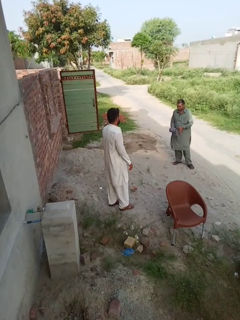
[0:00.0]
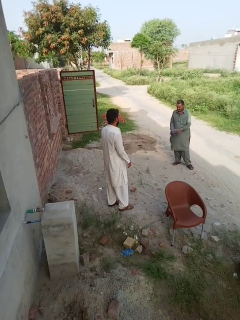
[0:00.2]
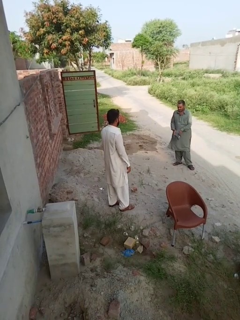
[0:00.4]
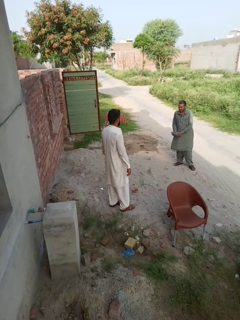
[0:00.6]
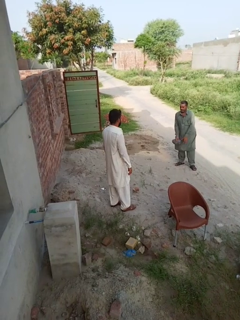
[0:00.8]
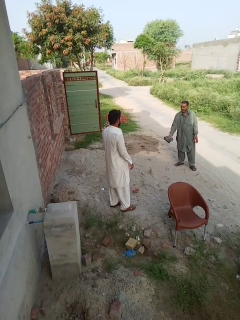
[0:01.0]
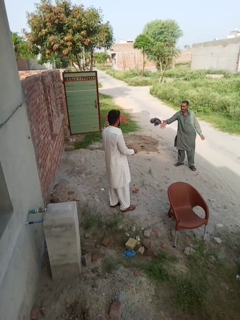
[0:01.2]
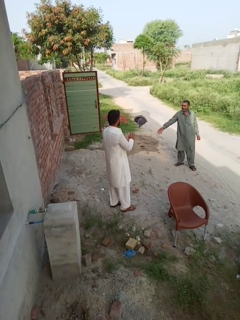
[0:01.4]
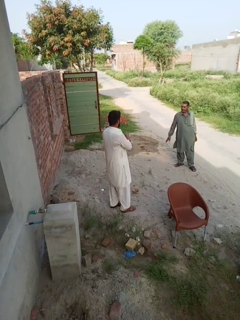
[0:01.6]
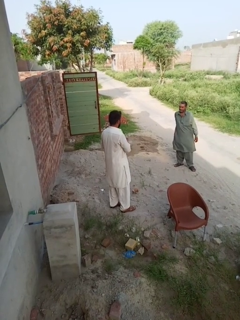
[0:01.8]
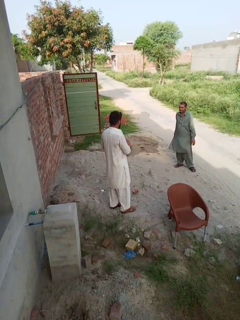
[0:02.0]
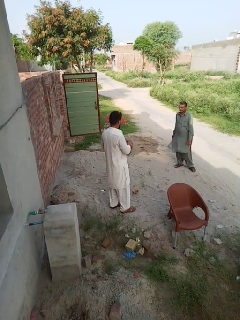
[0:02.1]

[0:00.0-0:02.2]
person catches object from person

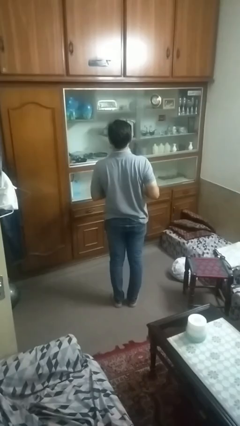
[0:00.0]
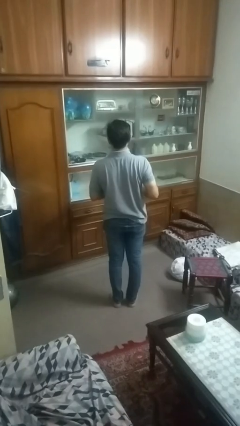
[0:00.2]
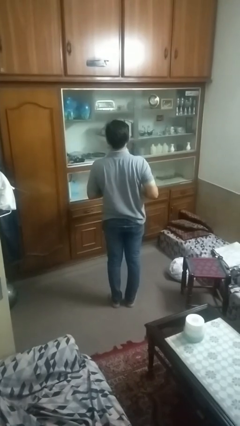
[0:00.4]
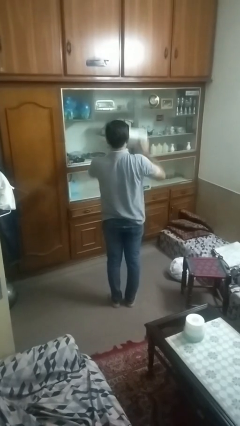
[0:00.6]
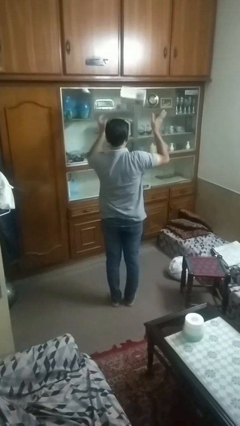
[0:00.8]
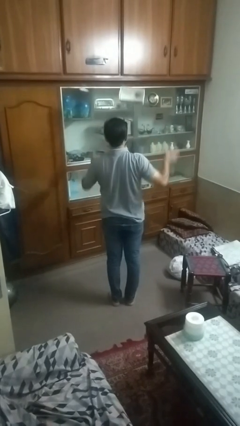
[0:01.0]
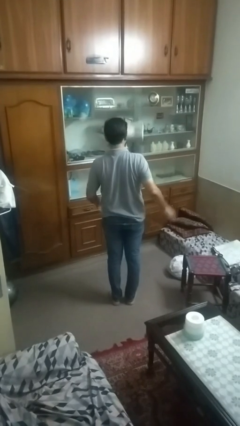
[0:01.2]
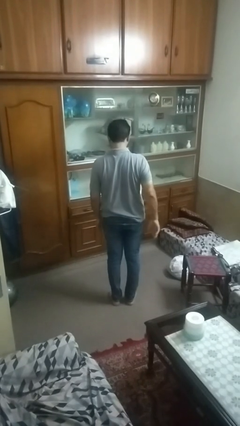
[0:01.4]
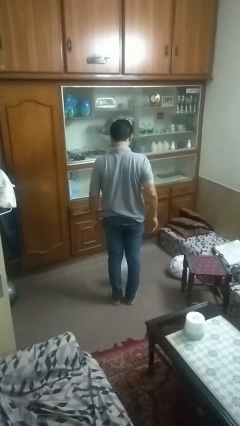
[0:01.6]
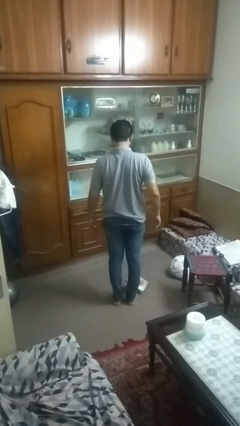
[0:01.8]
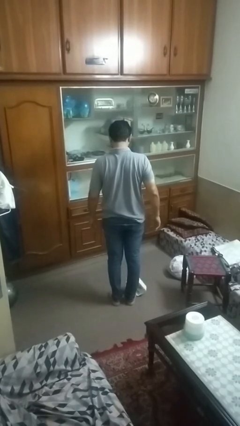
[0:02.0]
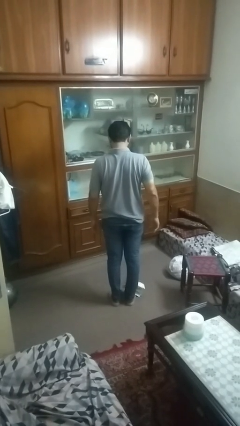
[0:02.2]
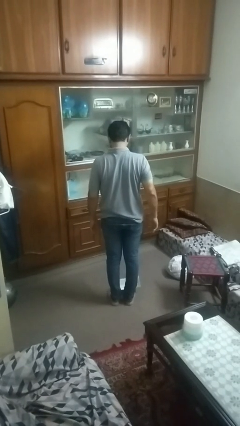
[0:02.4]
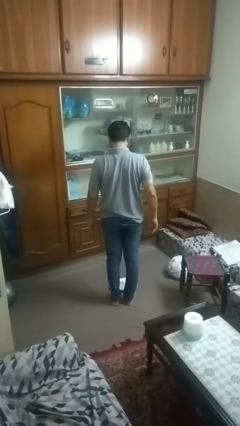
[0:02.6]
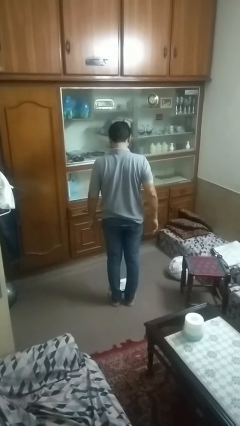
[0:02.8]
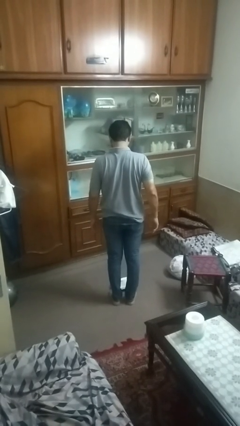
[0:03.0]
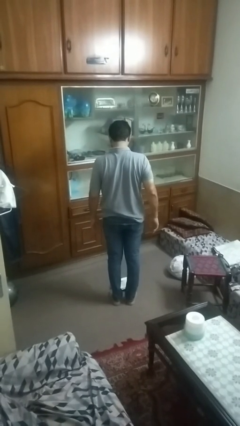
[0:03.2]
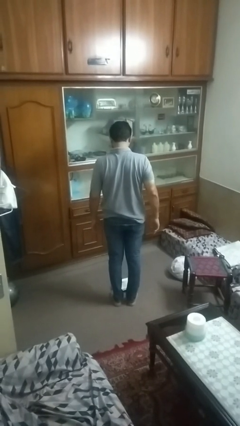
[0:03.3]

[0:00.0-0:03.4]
person throws object into air

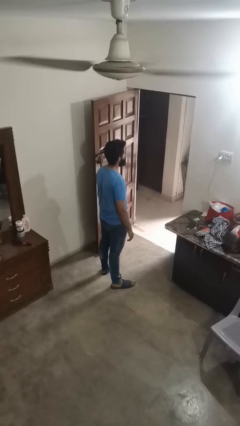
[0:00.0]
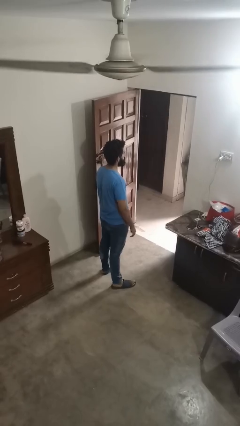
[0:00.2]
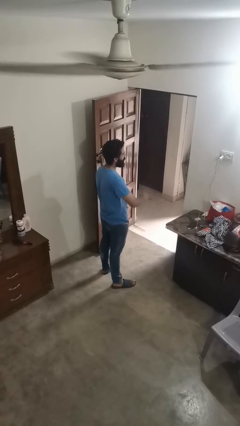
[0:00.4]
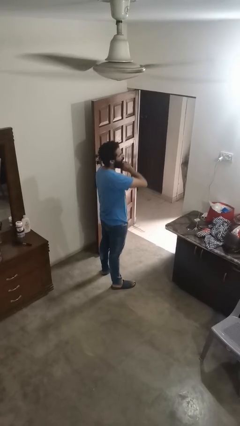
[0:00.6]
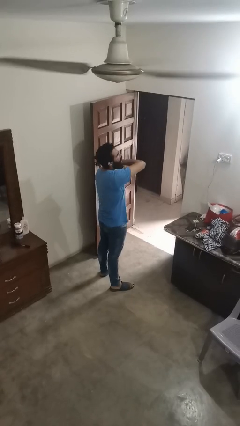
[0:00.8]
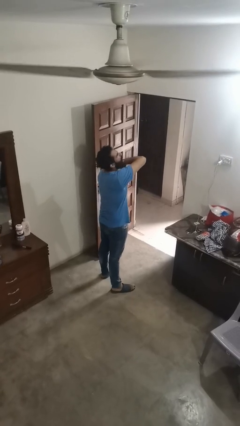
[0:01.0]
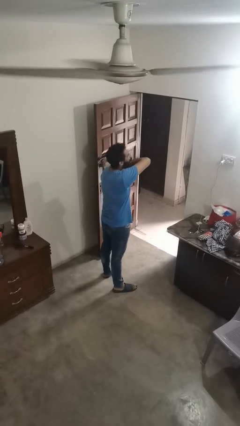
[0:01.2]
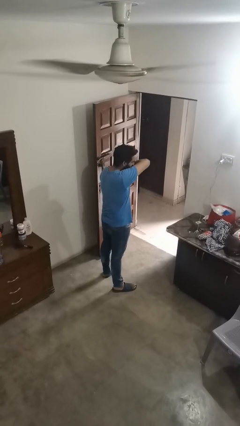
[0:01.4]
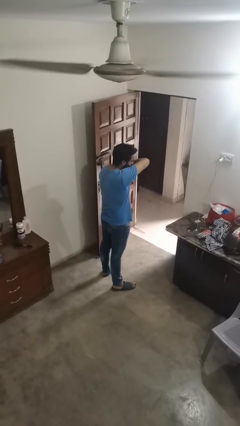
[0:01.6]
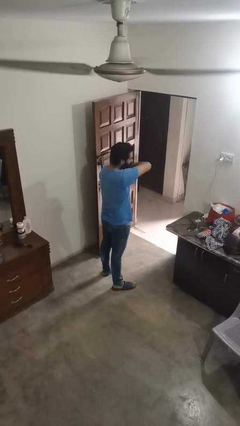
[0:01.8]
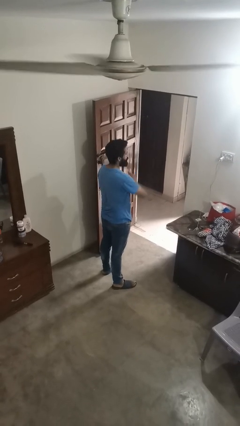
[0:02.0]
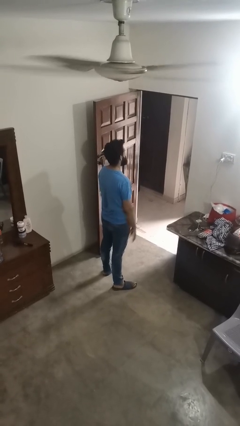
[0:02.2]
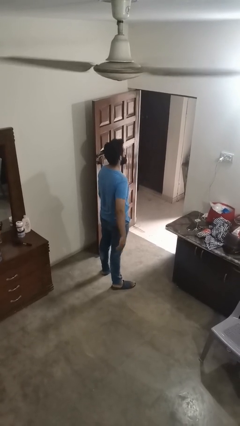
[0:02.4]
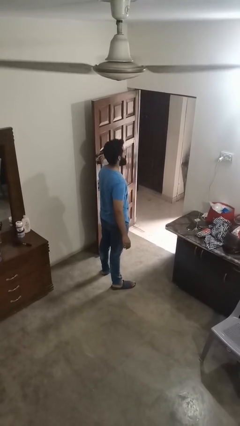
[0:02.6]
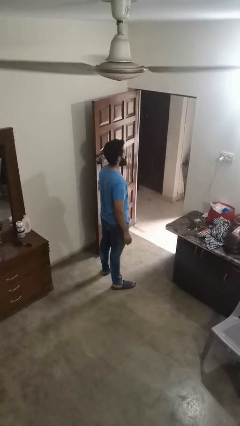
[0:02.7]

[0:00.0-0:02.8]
person sneezes into arm

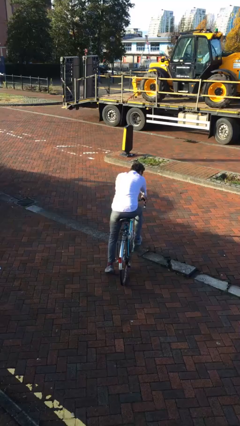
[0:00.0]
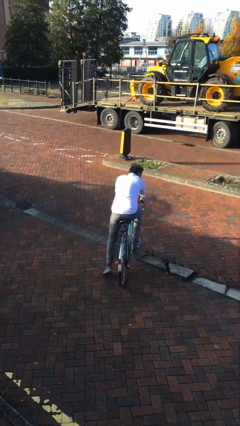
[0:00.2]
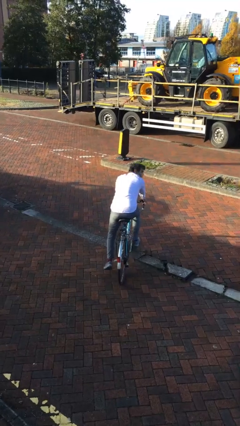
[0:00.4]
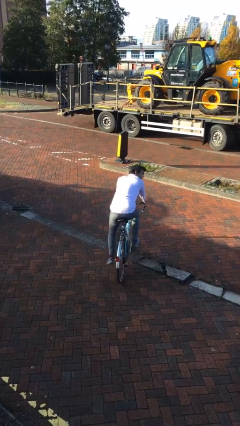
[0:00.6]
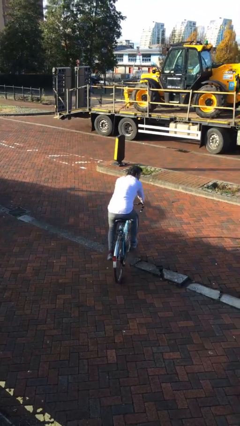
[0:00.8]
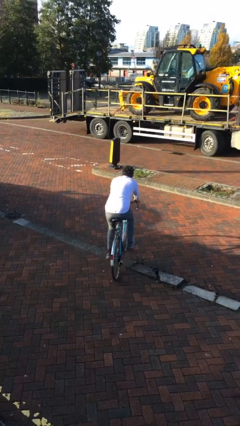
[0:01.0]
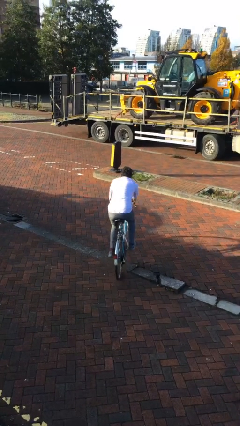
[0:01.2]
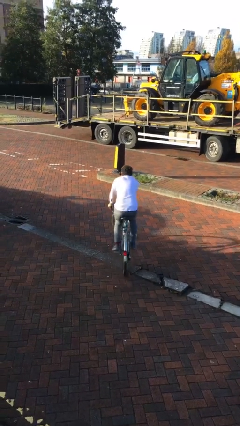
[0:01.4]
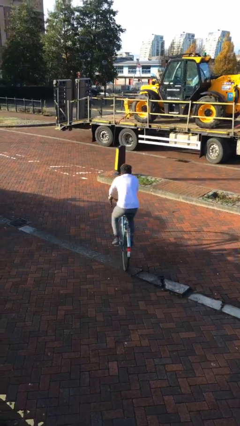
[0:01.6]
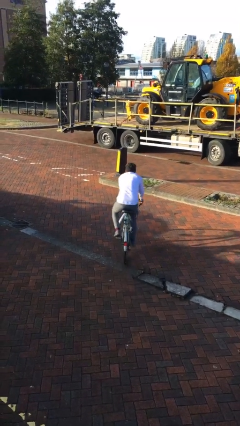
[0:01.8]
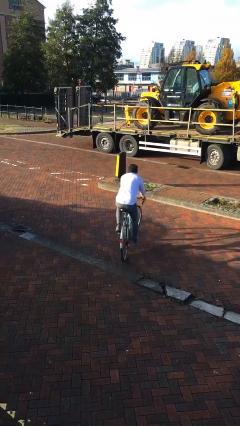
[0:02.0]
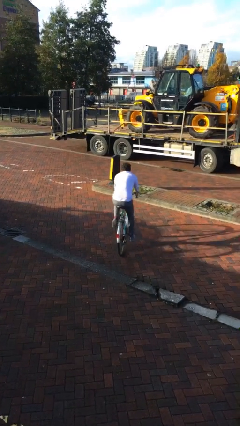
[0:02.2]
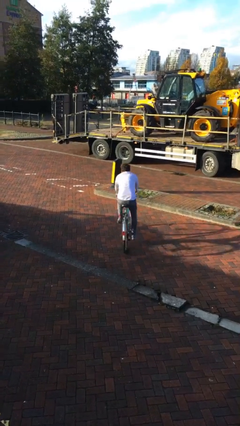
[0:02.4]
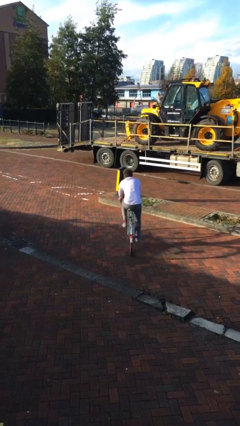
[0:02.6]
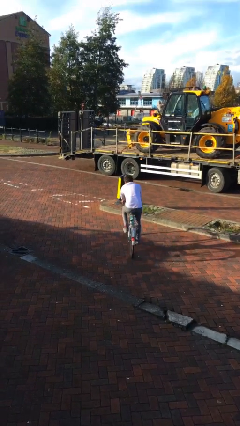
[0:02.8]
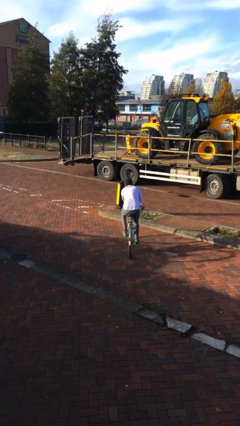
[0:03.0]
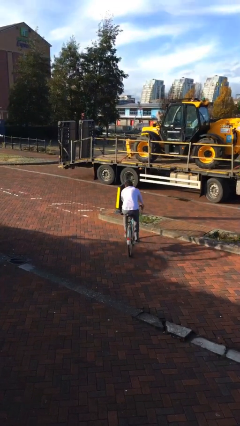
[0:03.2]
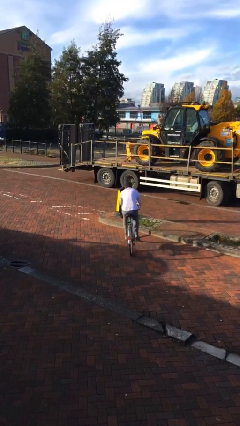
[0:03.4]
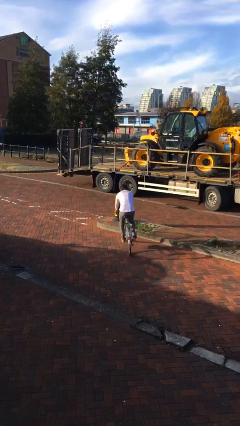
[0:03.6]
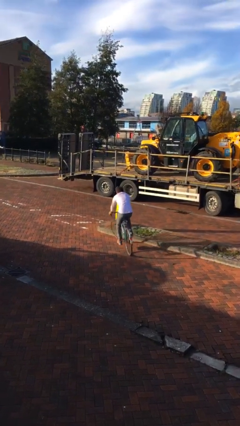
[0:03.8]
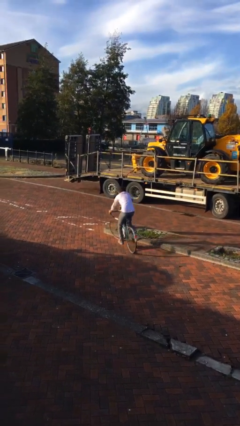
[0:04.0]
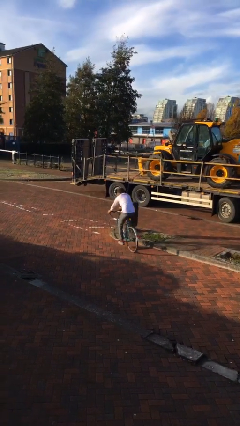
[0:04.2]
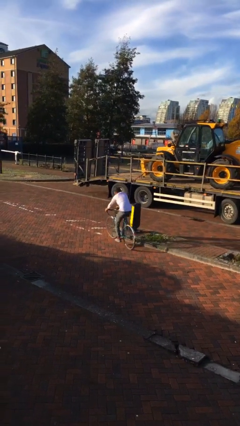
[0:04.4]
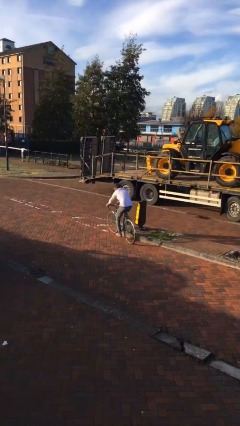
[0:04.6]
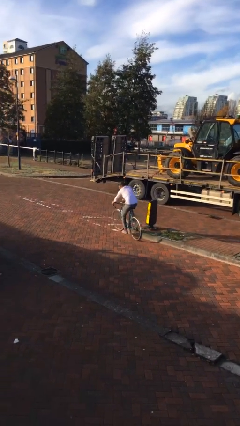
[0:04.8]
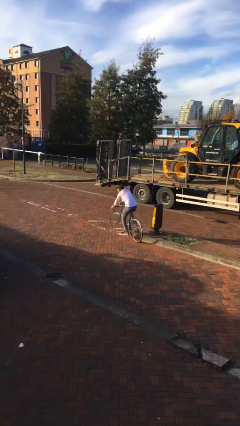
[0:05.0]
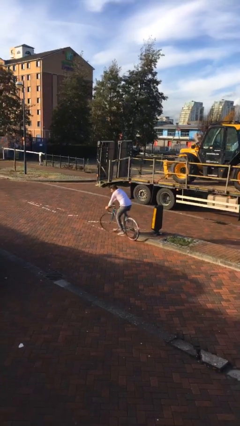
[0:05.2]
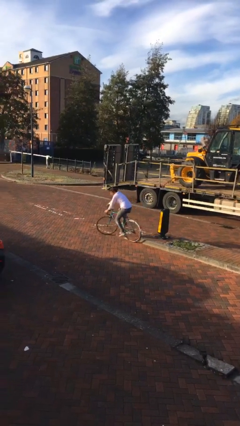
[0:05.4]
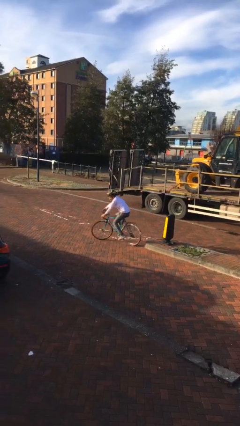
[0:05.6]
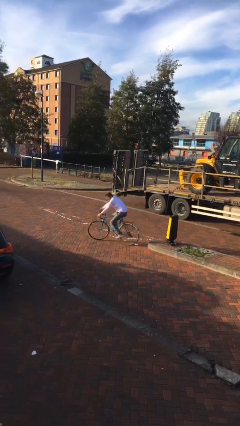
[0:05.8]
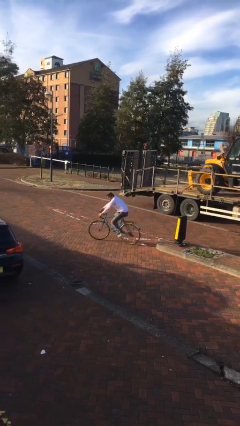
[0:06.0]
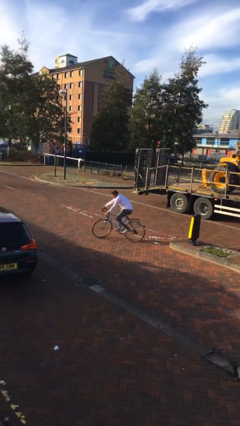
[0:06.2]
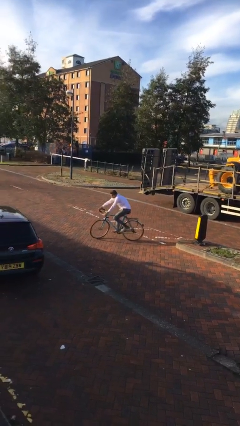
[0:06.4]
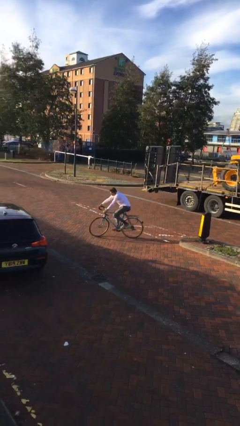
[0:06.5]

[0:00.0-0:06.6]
person rides bicycle

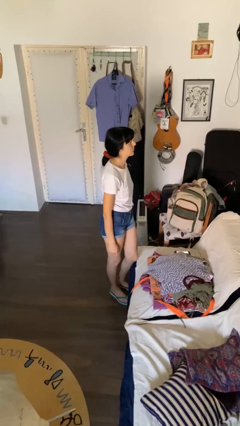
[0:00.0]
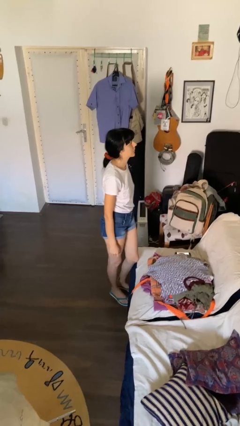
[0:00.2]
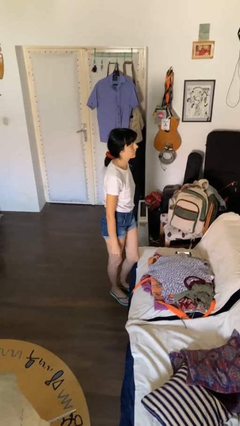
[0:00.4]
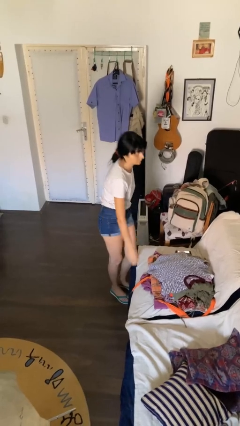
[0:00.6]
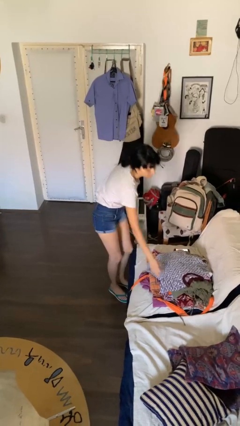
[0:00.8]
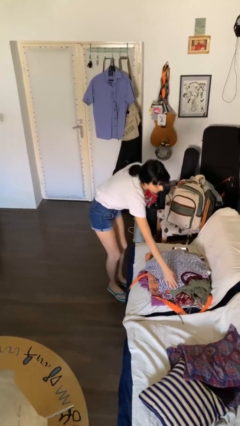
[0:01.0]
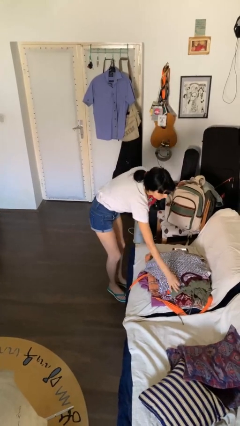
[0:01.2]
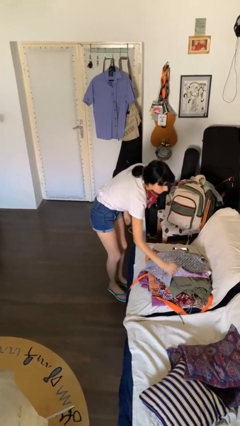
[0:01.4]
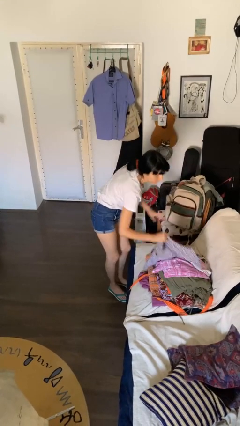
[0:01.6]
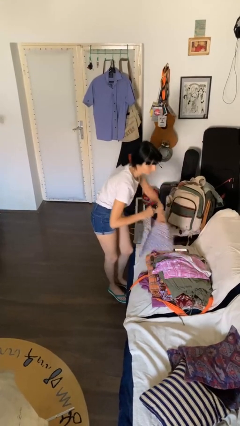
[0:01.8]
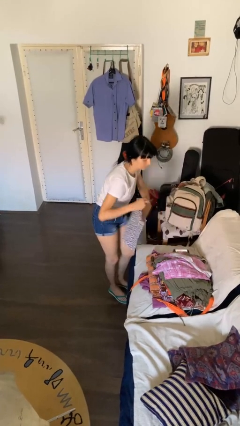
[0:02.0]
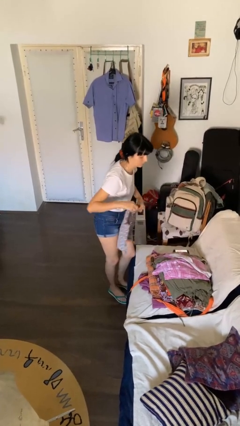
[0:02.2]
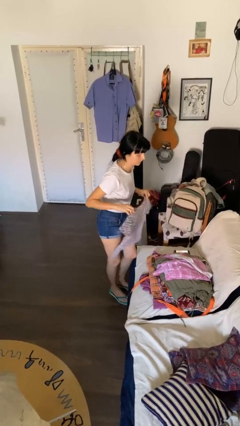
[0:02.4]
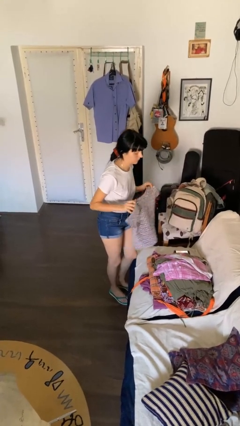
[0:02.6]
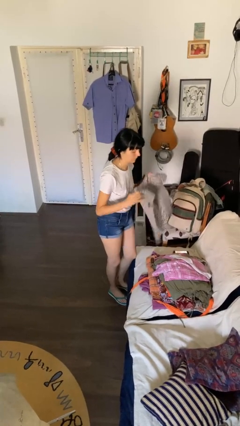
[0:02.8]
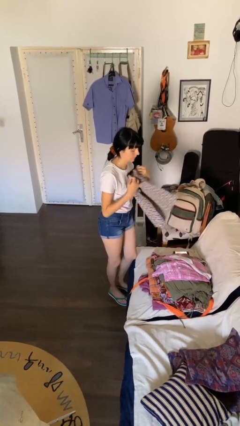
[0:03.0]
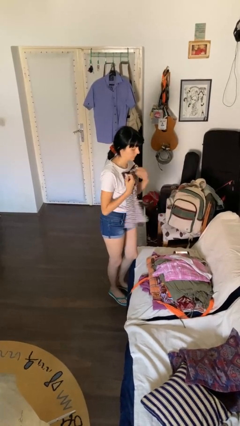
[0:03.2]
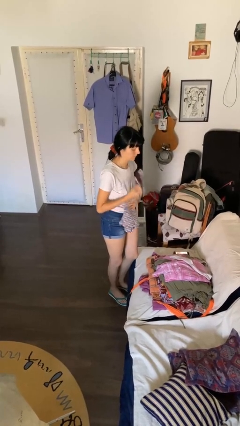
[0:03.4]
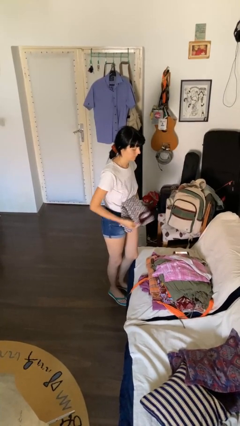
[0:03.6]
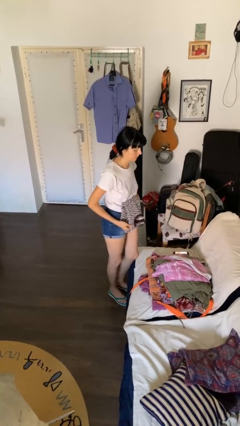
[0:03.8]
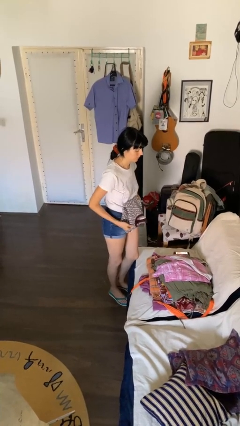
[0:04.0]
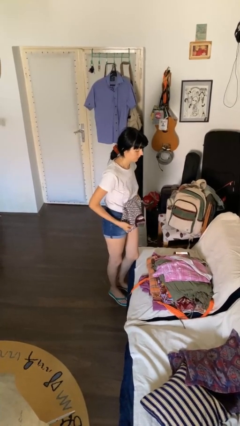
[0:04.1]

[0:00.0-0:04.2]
person folds shirt
